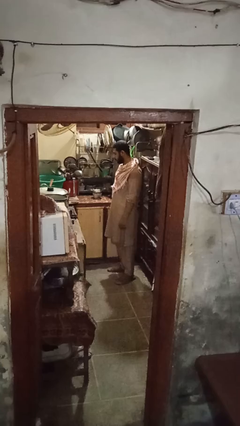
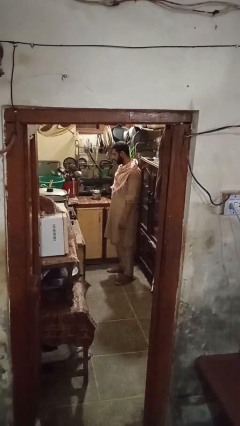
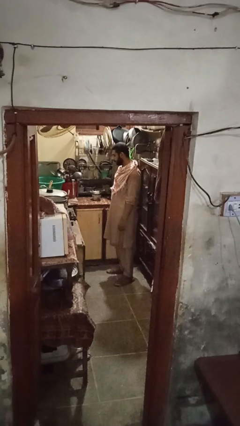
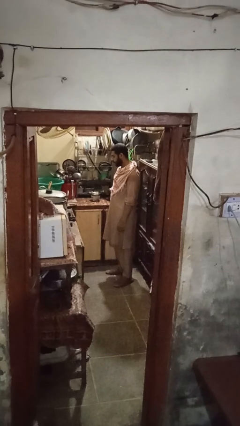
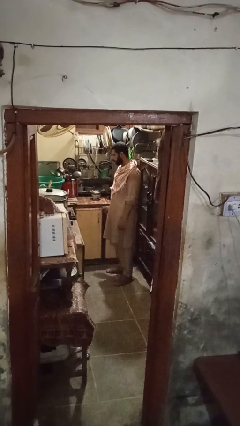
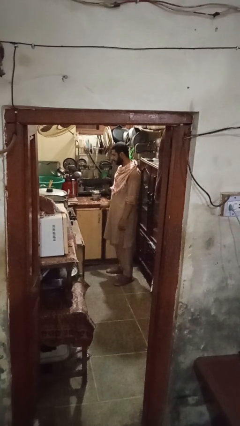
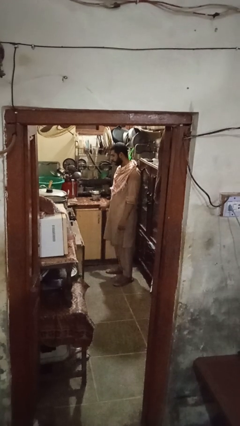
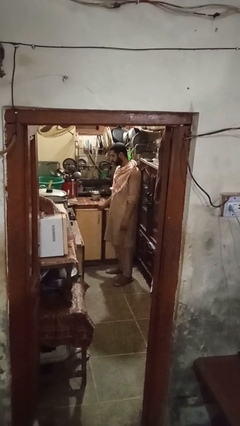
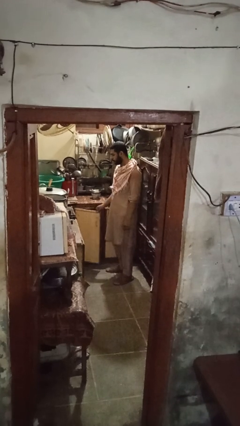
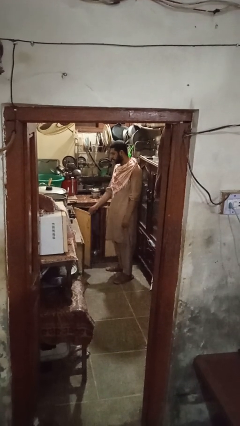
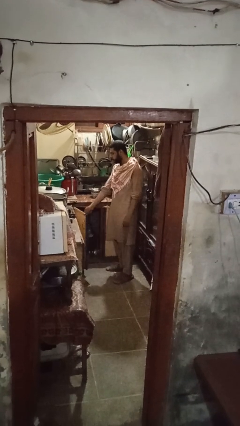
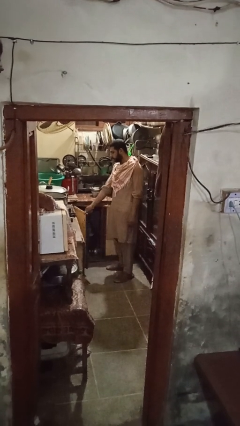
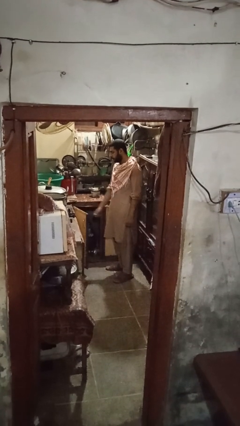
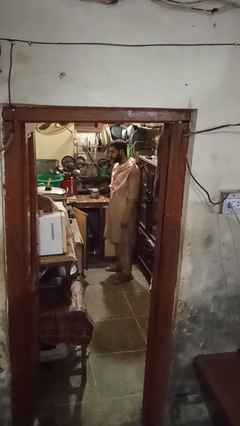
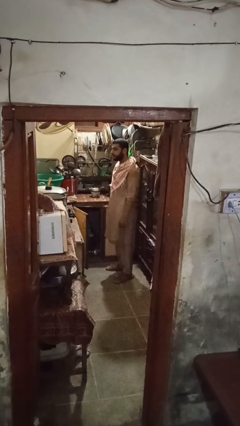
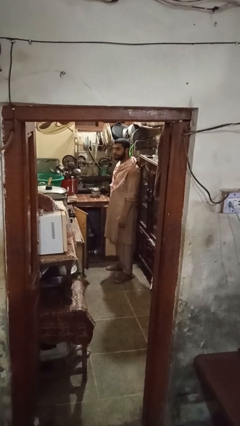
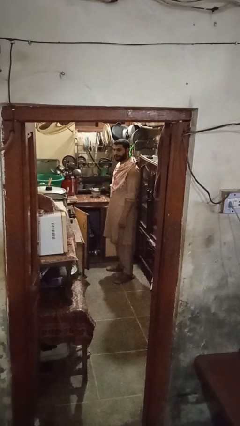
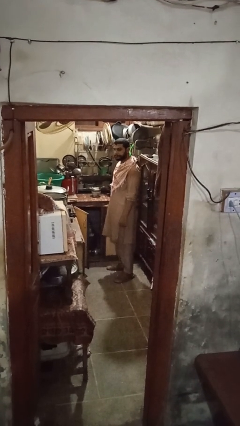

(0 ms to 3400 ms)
person opens cabinet

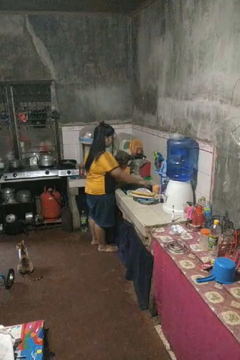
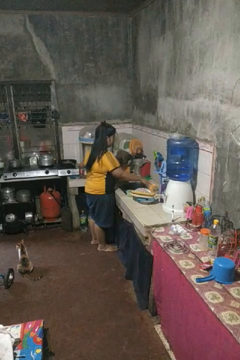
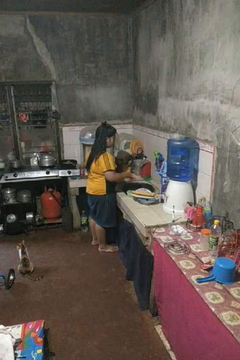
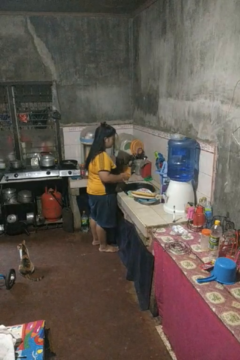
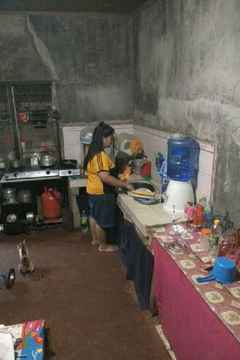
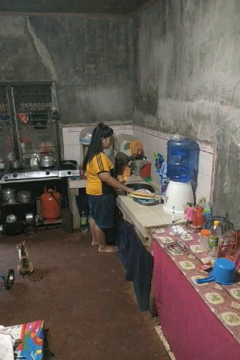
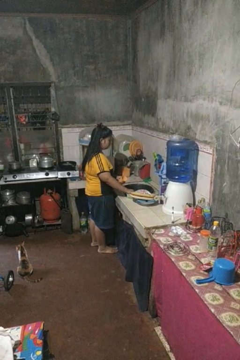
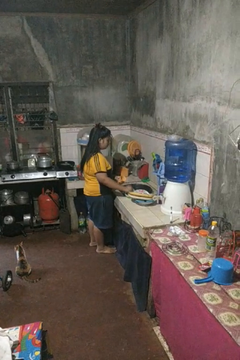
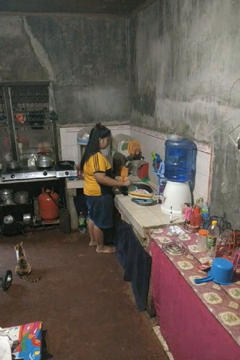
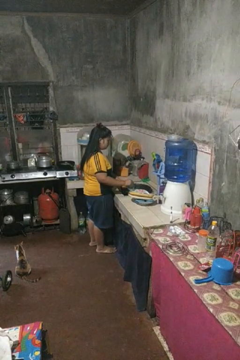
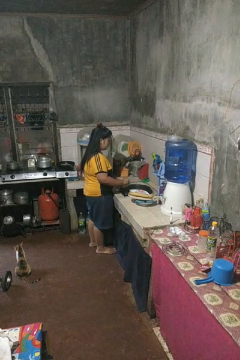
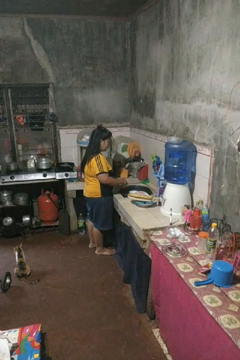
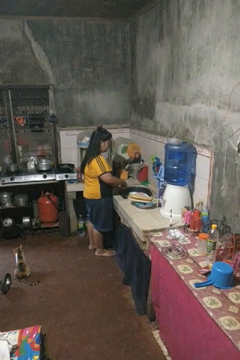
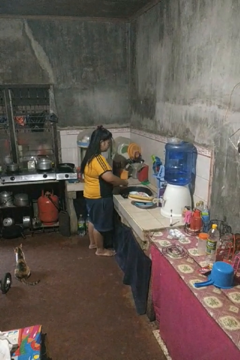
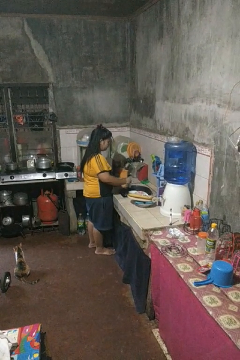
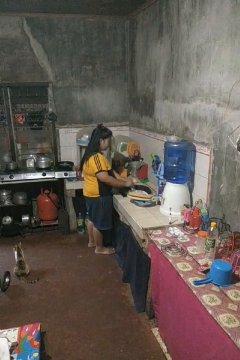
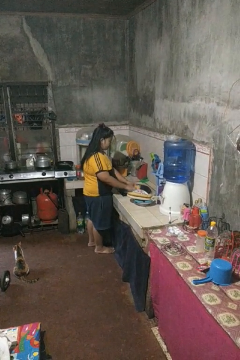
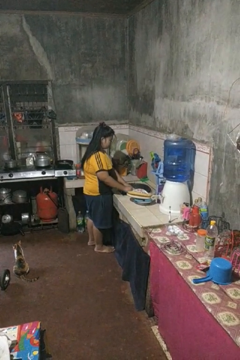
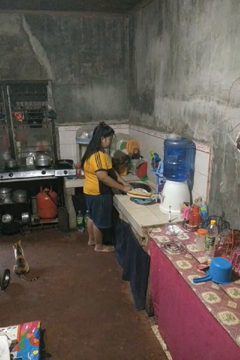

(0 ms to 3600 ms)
person washes dish

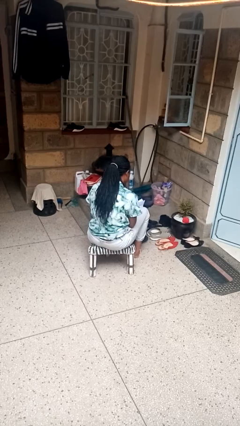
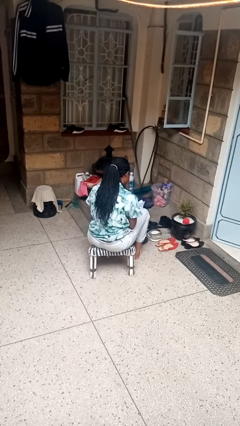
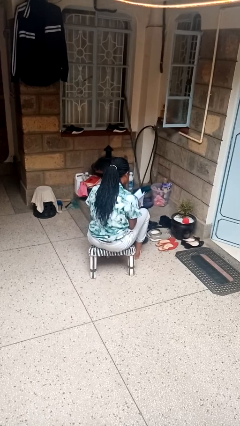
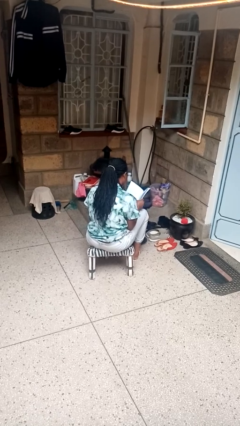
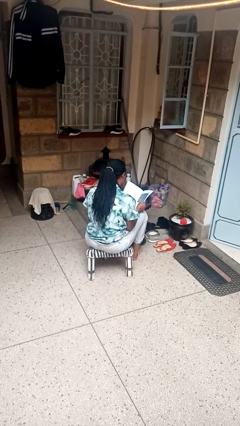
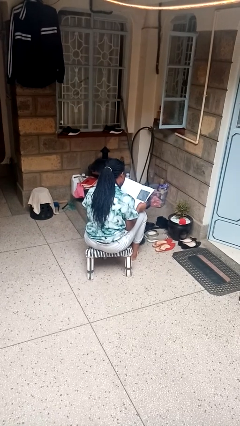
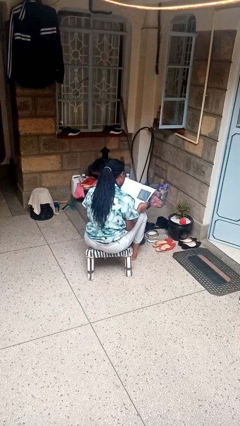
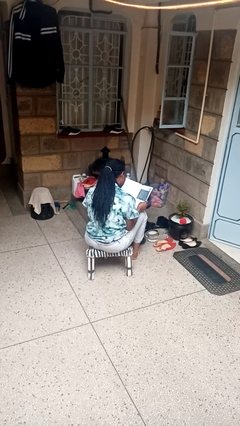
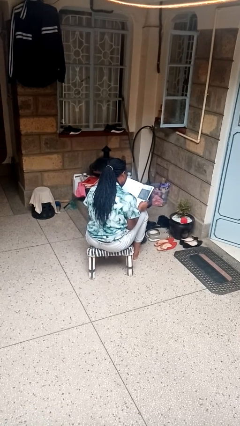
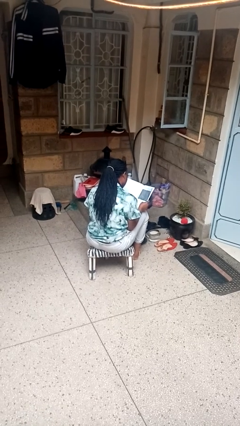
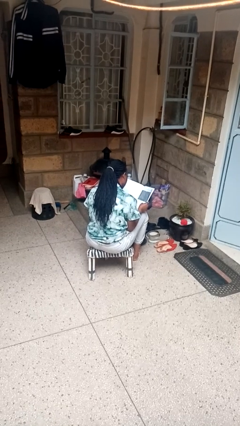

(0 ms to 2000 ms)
person reads magazine

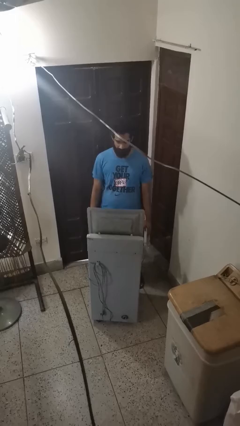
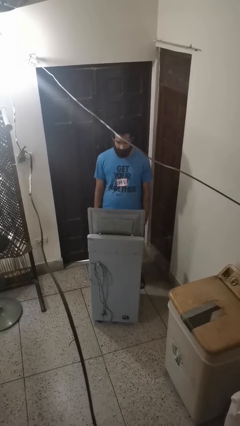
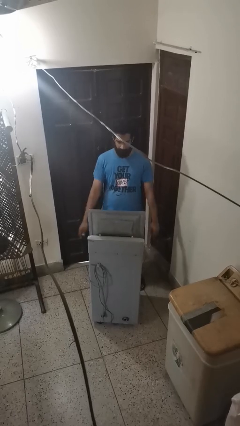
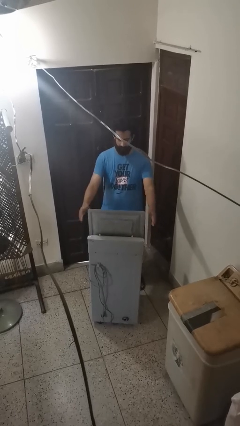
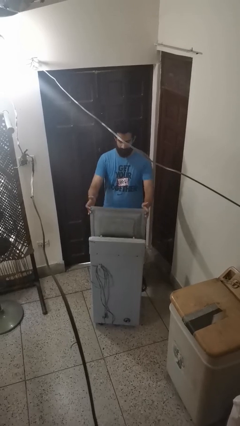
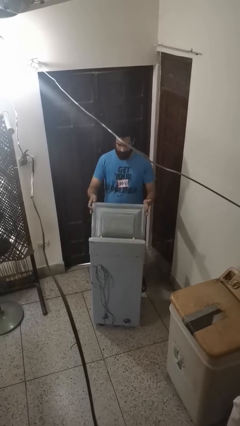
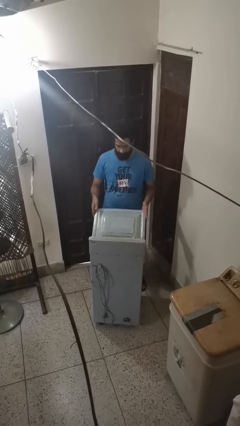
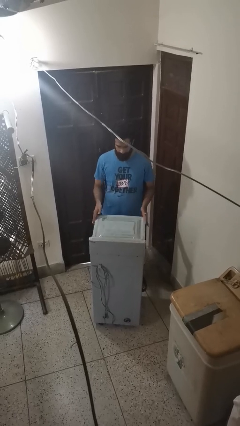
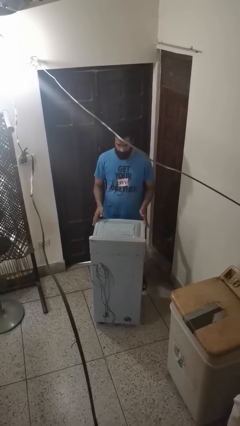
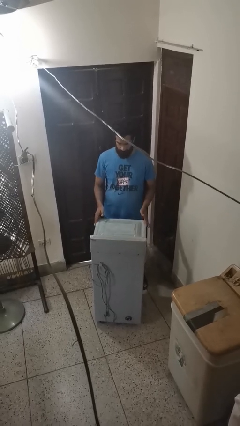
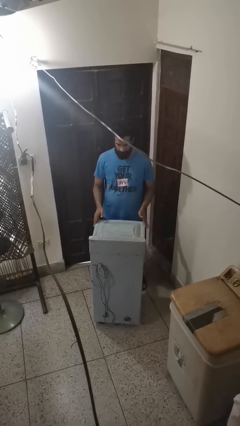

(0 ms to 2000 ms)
person closes clothes washer

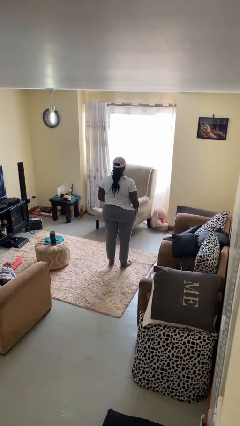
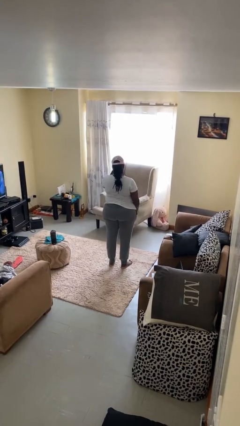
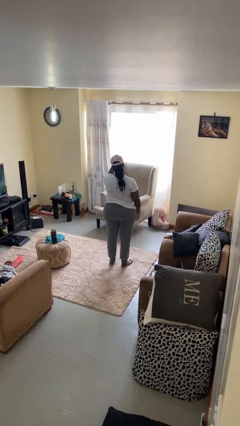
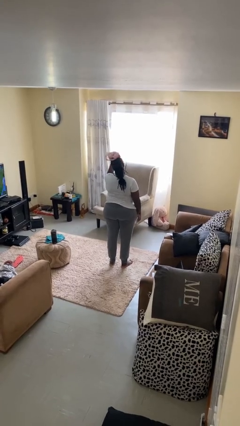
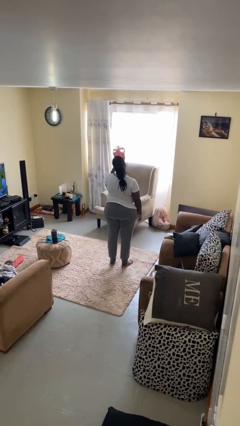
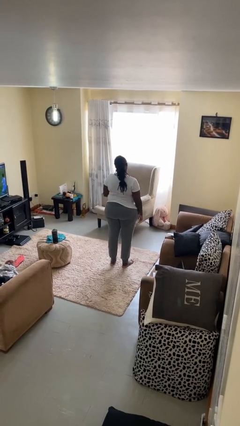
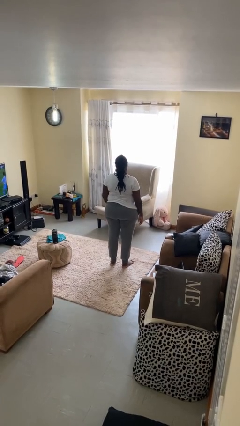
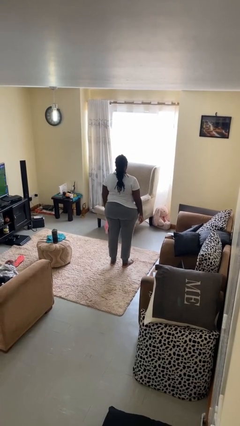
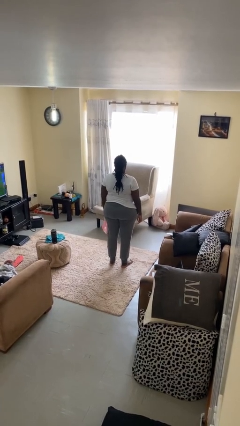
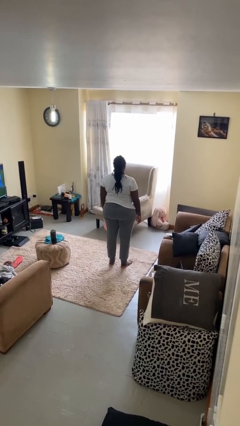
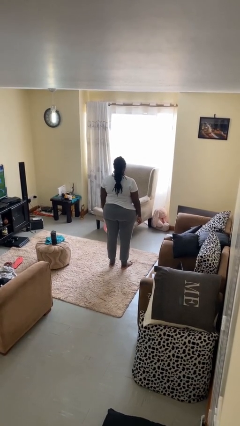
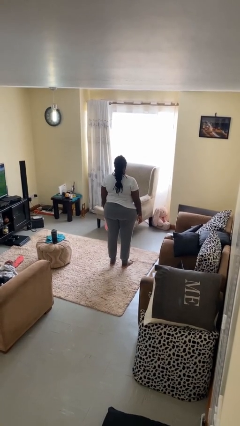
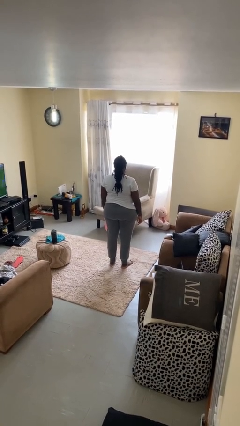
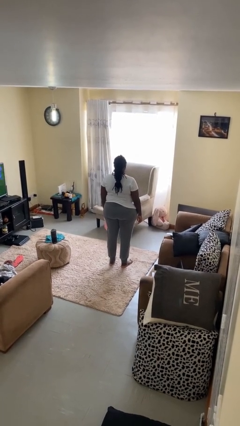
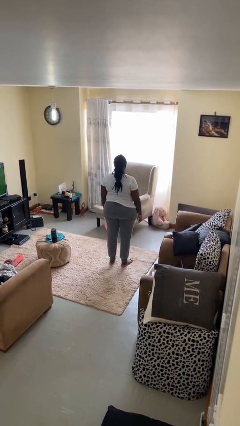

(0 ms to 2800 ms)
person takes off hat

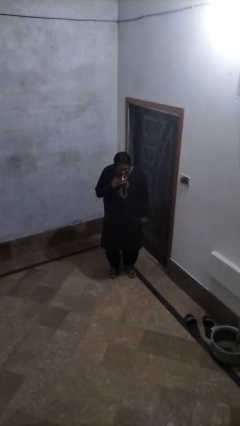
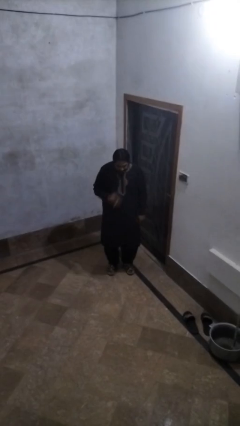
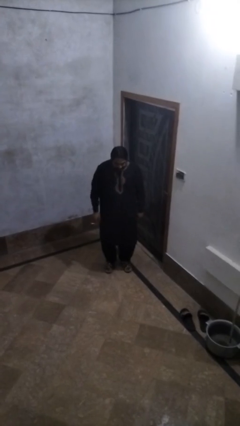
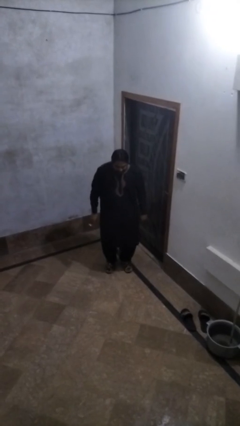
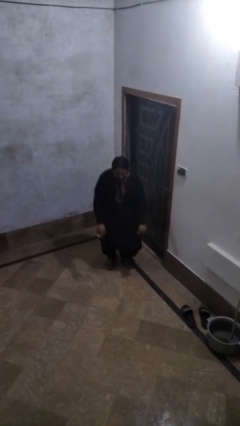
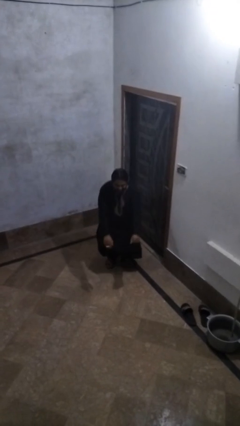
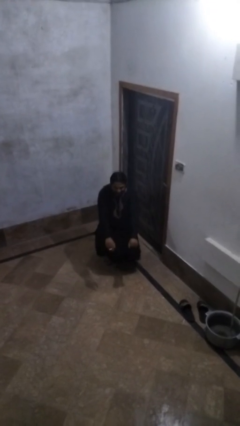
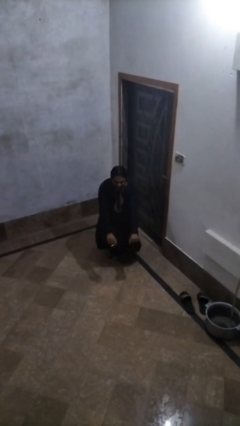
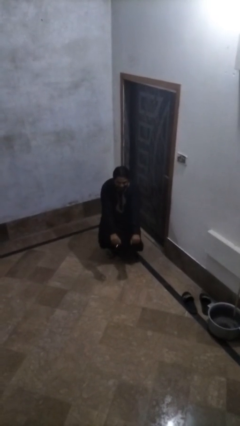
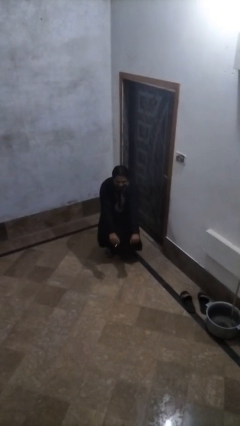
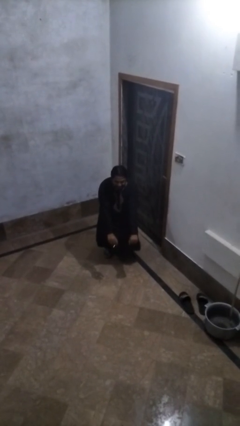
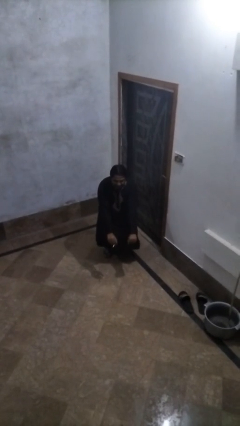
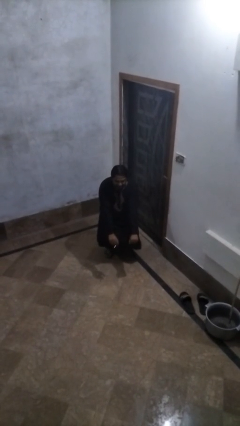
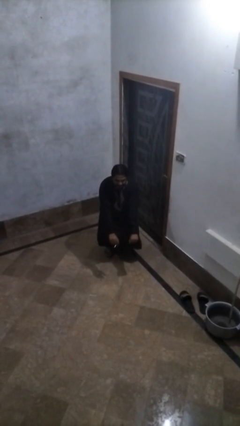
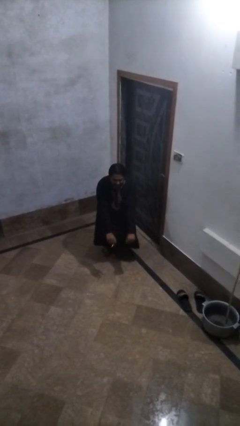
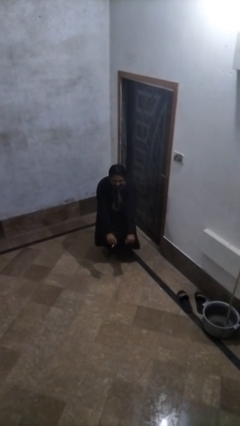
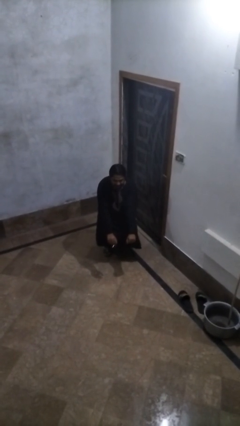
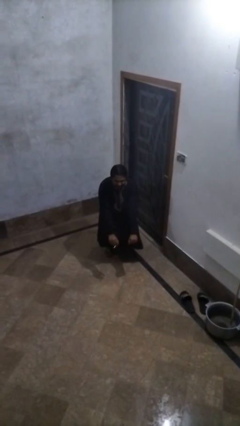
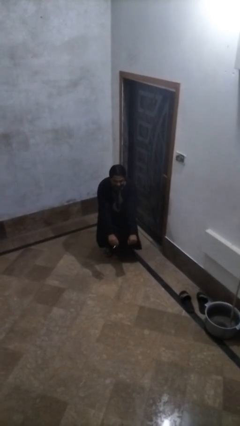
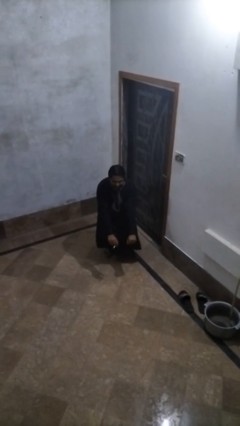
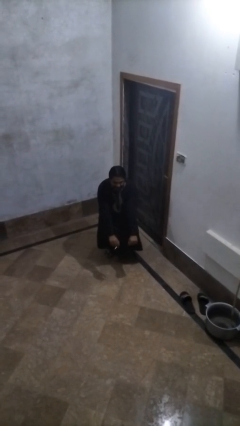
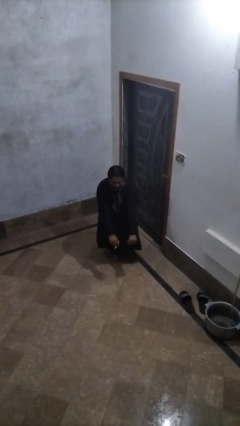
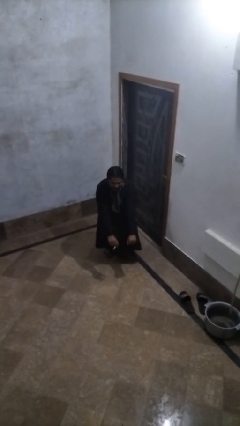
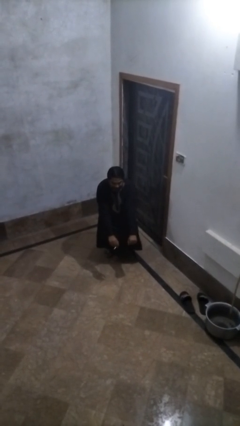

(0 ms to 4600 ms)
person squats
